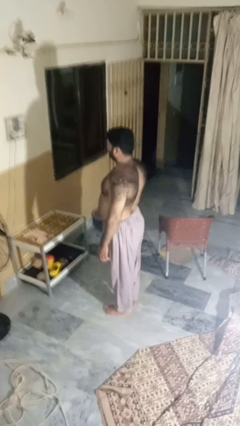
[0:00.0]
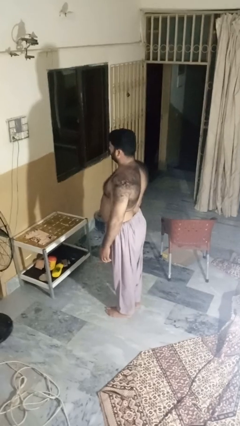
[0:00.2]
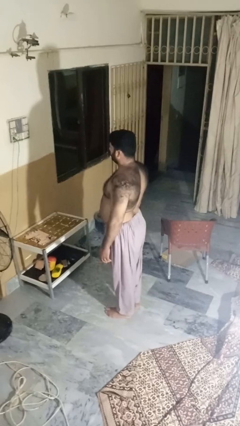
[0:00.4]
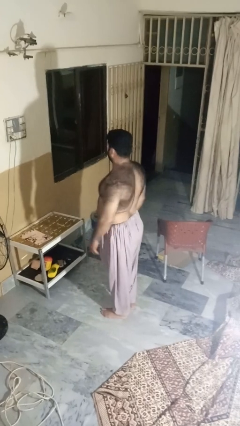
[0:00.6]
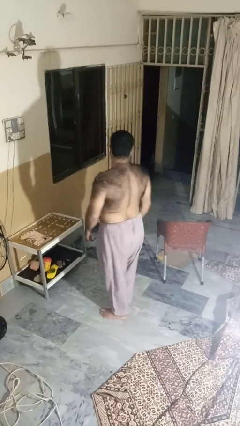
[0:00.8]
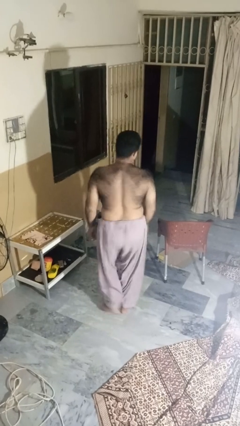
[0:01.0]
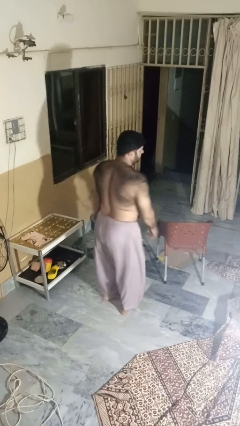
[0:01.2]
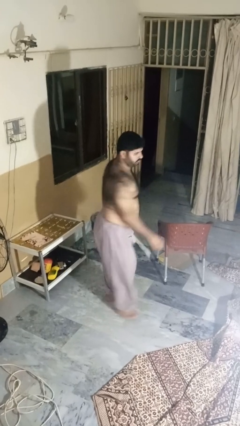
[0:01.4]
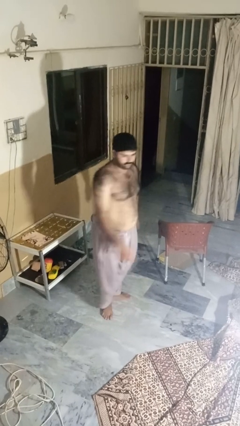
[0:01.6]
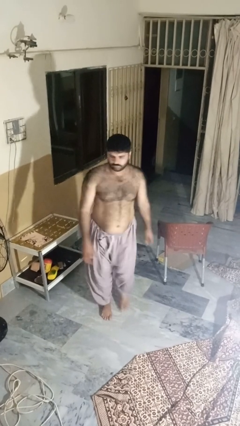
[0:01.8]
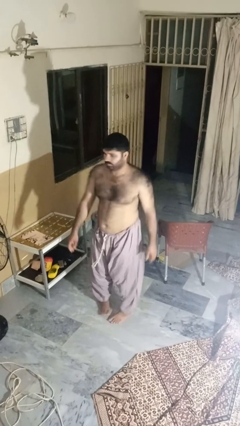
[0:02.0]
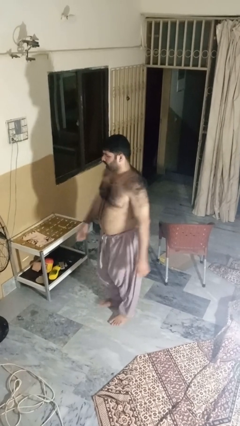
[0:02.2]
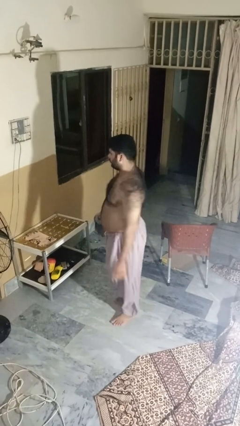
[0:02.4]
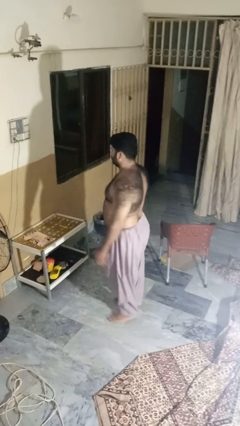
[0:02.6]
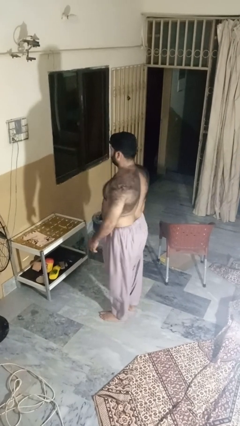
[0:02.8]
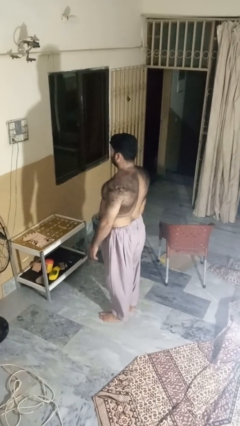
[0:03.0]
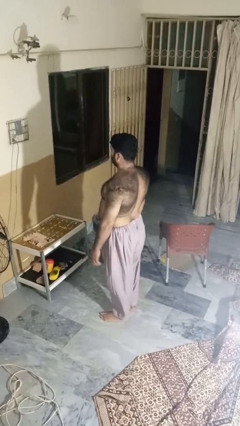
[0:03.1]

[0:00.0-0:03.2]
person twirls

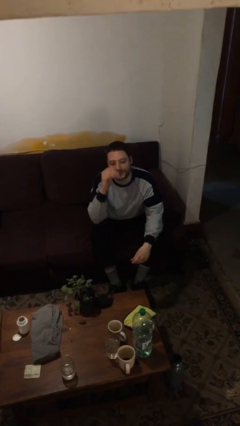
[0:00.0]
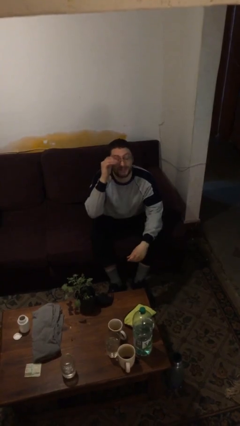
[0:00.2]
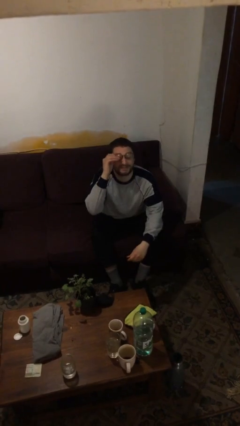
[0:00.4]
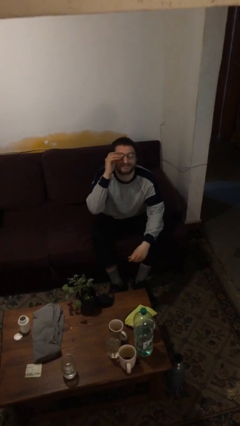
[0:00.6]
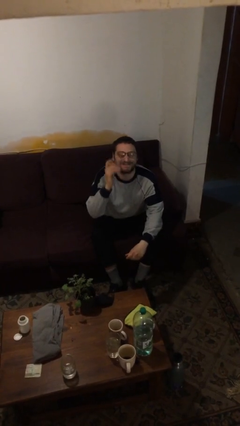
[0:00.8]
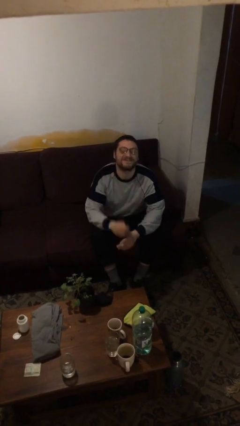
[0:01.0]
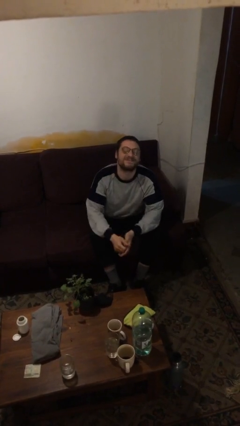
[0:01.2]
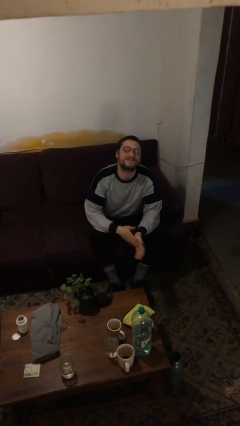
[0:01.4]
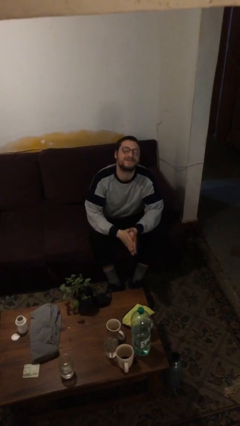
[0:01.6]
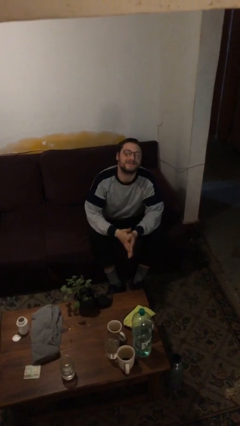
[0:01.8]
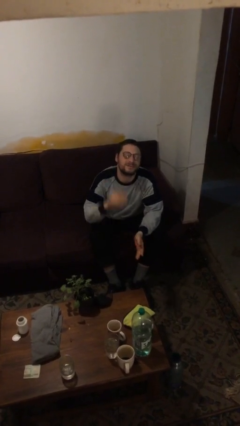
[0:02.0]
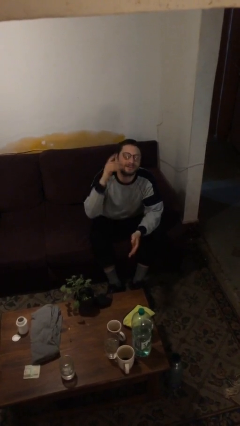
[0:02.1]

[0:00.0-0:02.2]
person puts on glasses

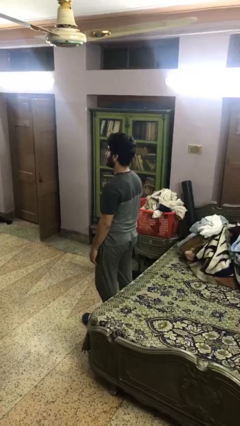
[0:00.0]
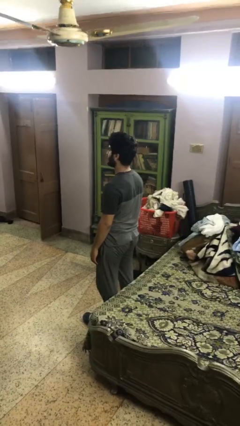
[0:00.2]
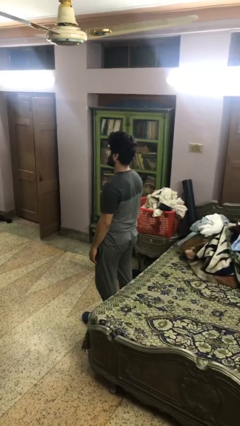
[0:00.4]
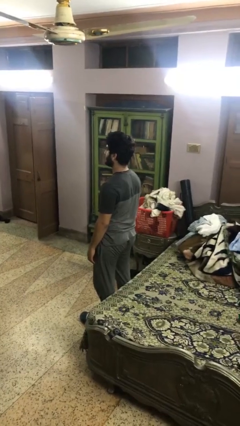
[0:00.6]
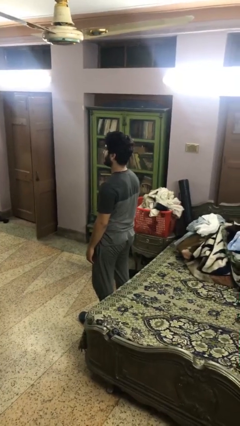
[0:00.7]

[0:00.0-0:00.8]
person stands up

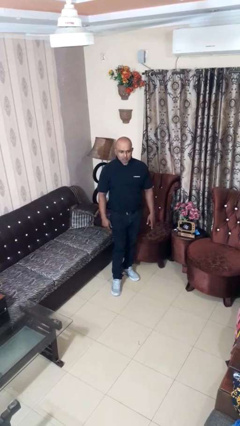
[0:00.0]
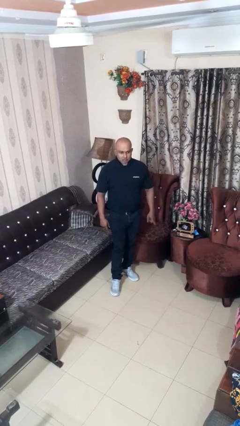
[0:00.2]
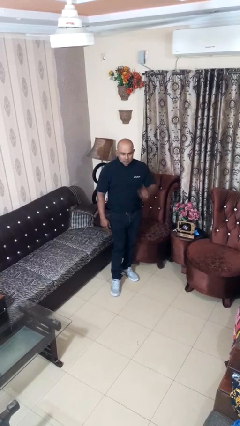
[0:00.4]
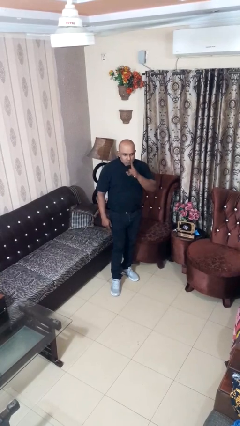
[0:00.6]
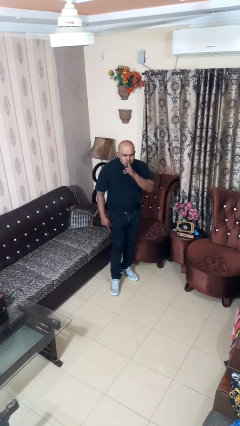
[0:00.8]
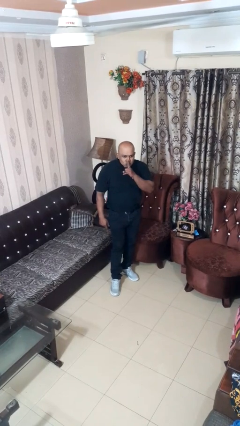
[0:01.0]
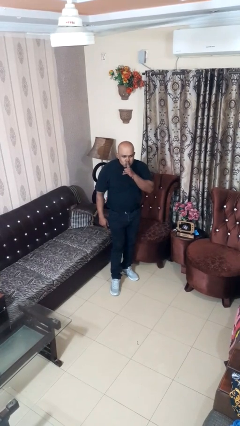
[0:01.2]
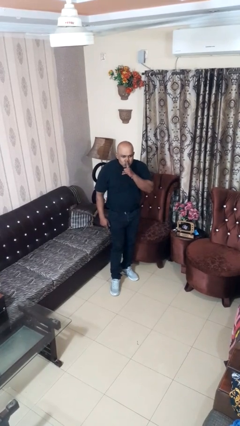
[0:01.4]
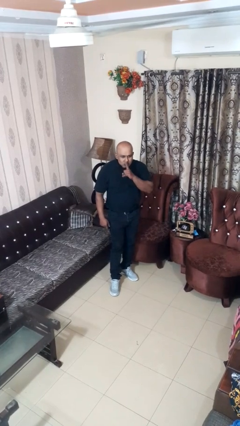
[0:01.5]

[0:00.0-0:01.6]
person gestures be quiet

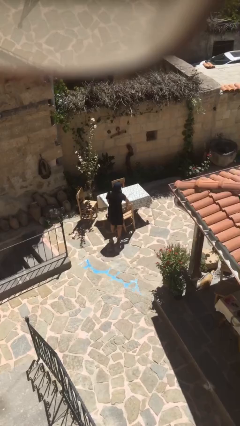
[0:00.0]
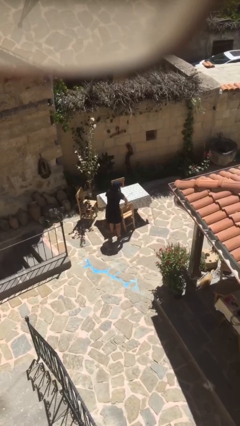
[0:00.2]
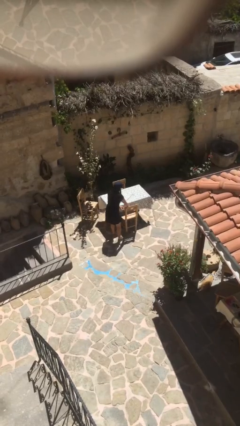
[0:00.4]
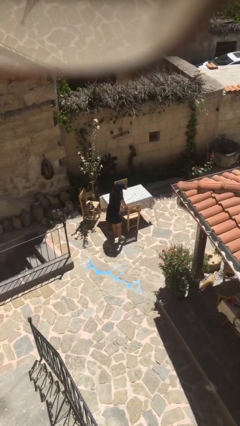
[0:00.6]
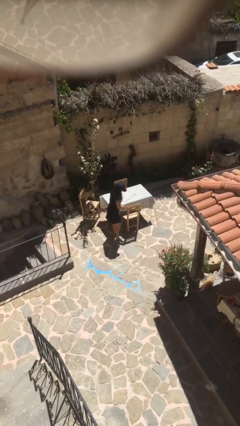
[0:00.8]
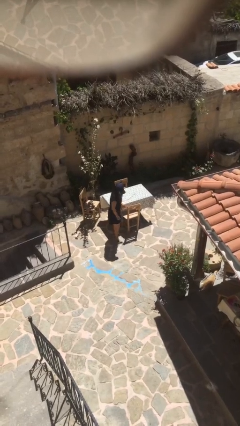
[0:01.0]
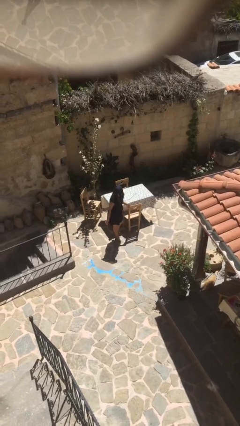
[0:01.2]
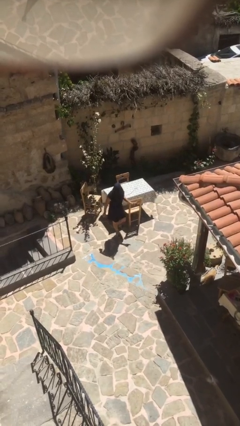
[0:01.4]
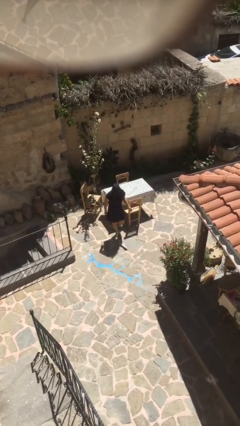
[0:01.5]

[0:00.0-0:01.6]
person puts down object on floor

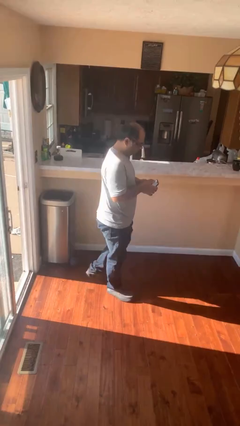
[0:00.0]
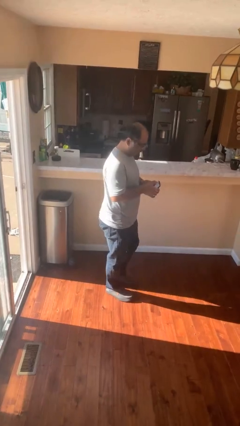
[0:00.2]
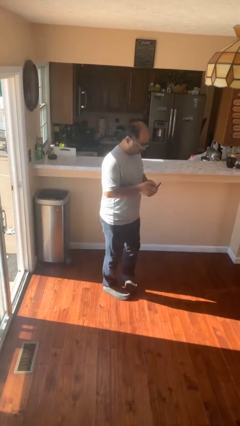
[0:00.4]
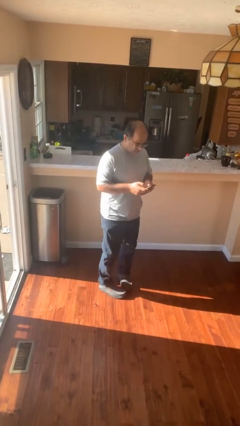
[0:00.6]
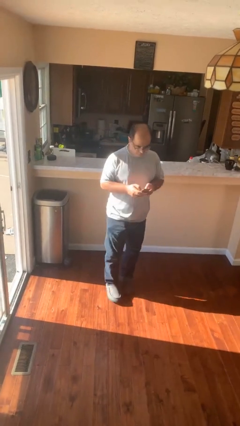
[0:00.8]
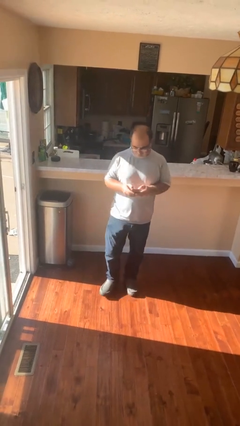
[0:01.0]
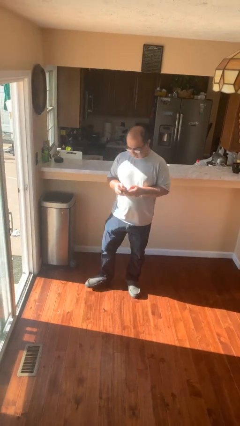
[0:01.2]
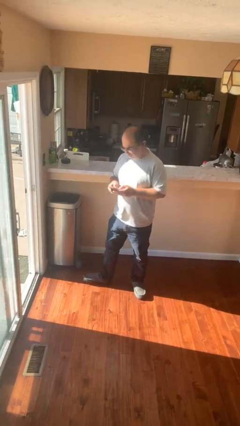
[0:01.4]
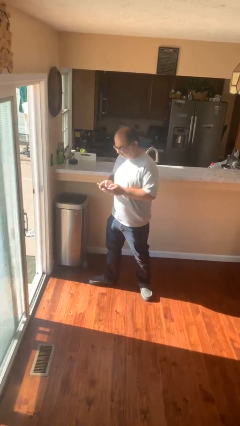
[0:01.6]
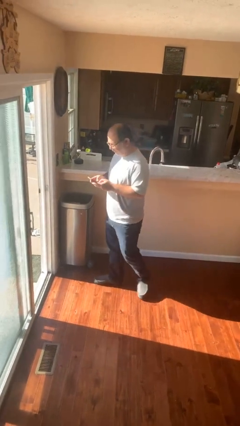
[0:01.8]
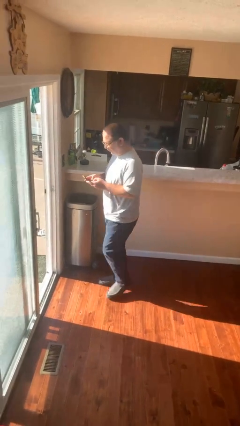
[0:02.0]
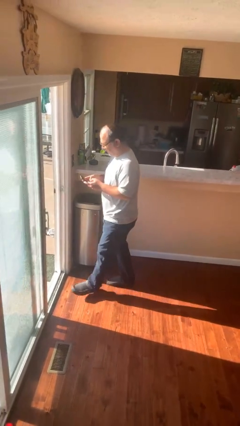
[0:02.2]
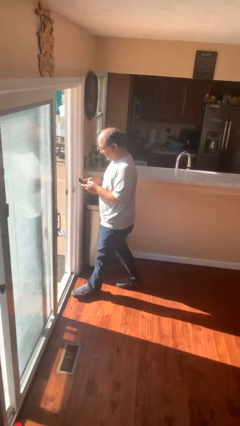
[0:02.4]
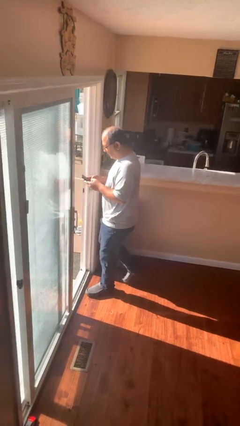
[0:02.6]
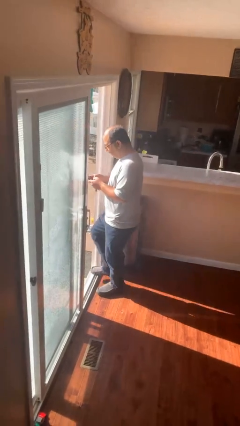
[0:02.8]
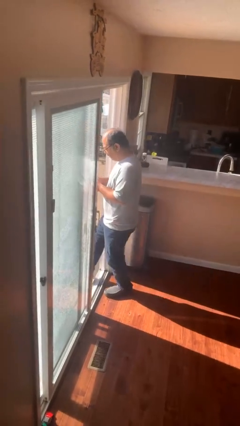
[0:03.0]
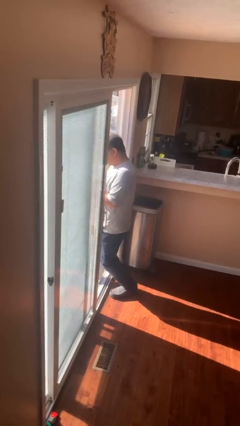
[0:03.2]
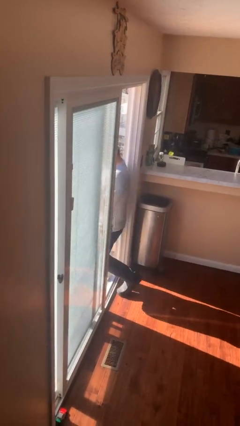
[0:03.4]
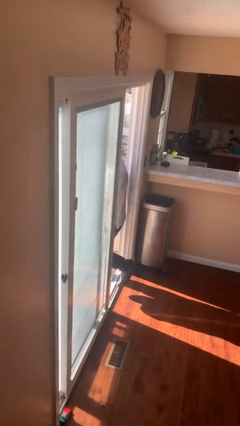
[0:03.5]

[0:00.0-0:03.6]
person exits scene through structure

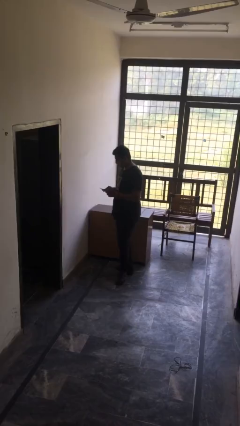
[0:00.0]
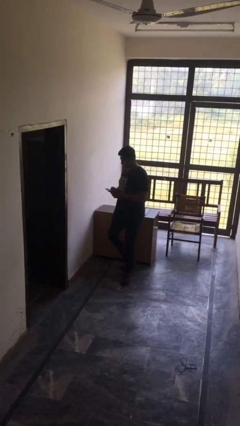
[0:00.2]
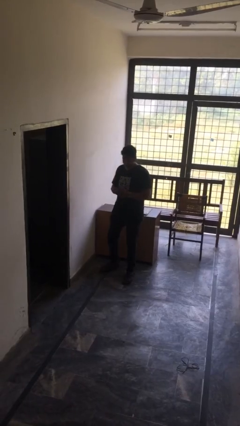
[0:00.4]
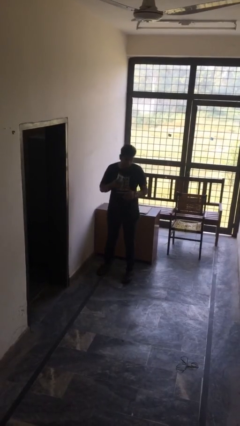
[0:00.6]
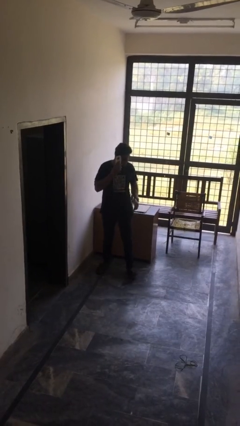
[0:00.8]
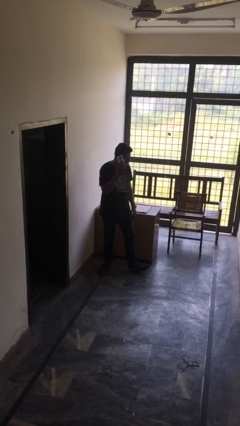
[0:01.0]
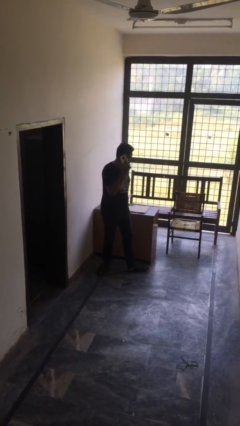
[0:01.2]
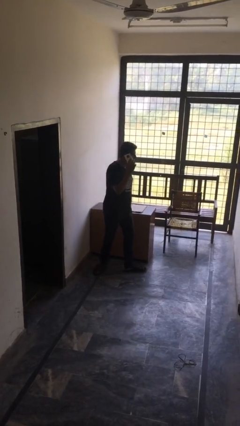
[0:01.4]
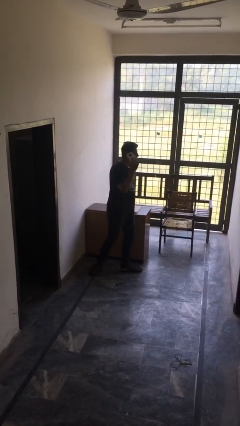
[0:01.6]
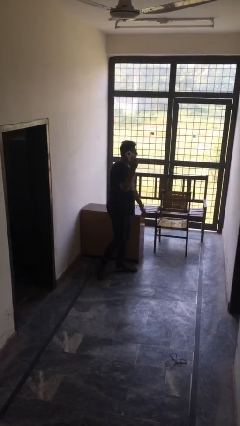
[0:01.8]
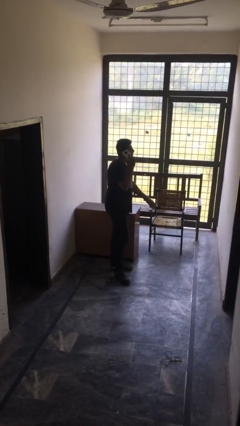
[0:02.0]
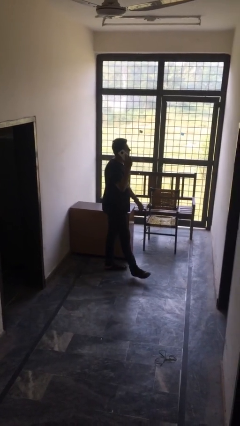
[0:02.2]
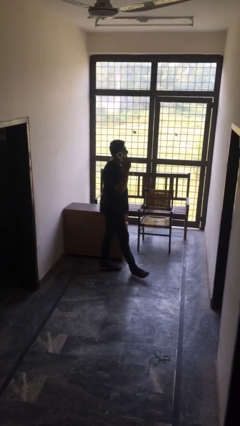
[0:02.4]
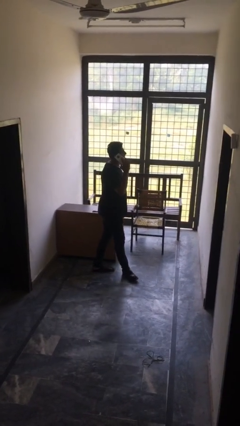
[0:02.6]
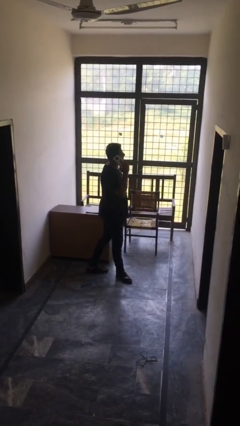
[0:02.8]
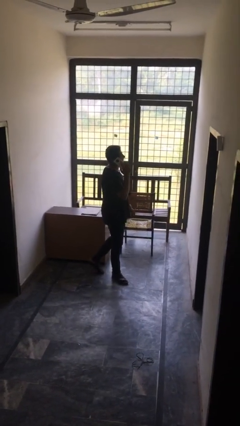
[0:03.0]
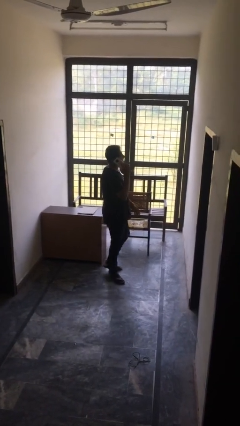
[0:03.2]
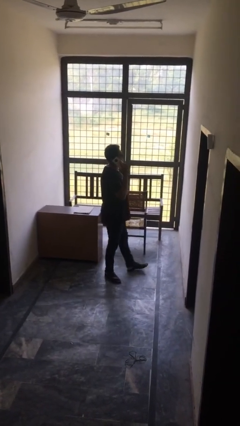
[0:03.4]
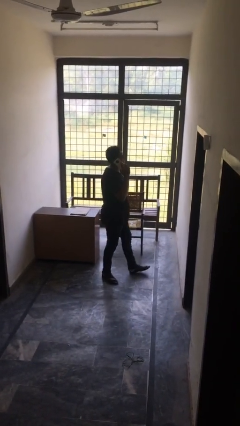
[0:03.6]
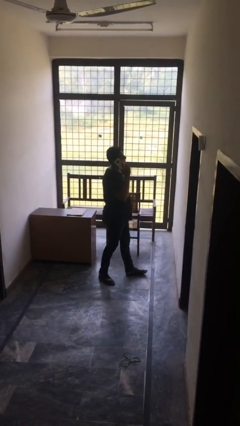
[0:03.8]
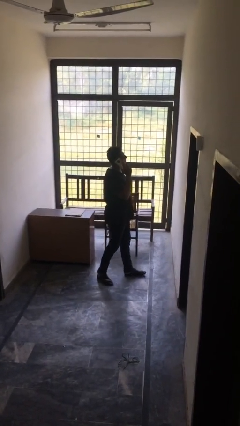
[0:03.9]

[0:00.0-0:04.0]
person talks on phone
